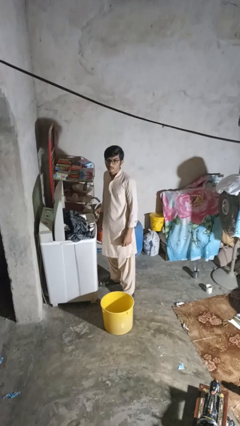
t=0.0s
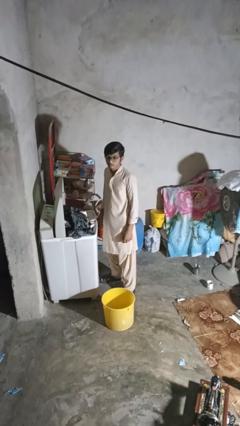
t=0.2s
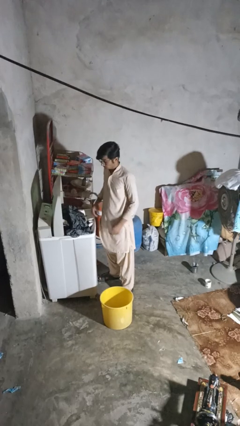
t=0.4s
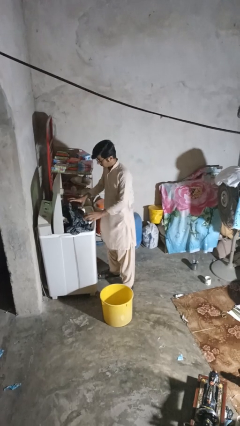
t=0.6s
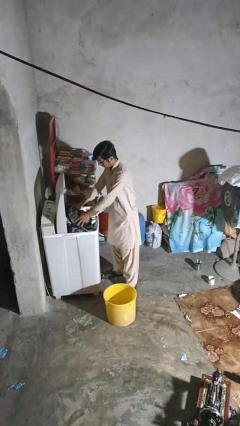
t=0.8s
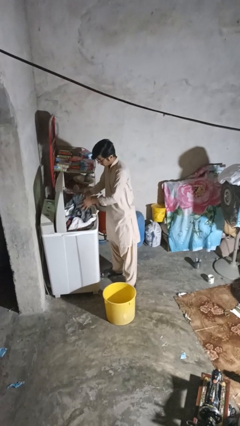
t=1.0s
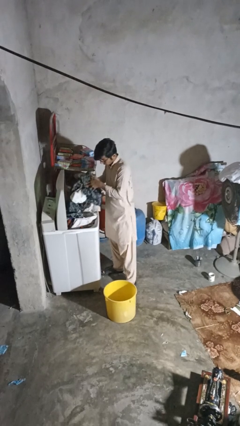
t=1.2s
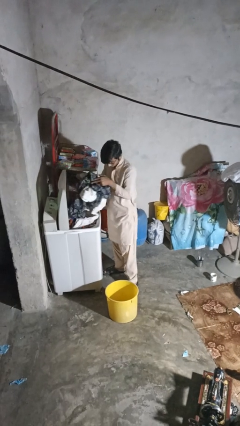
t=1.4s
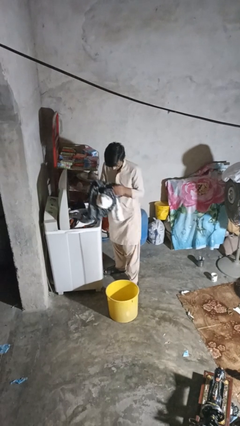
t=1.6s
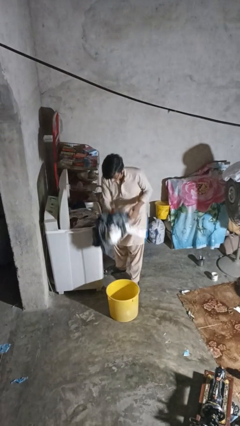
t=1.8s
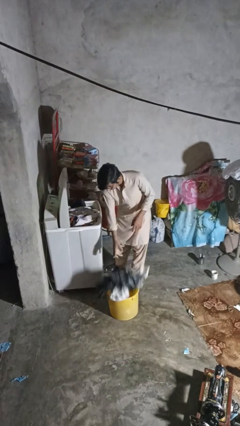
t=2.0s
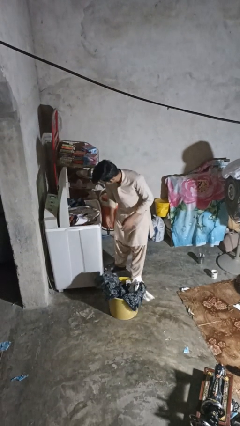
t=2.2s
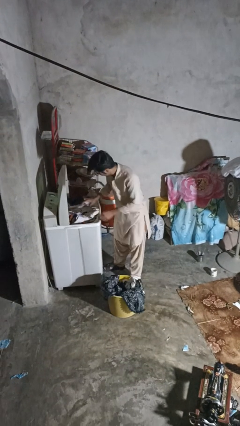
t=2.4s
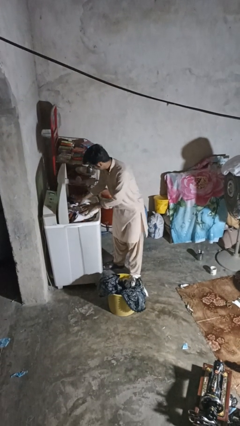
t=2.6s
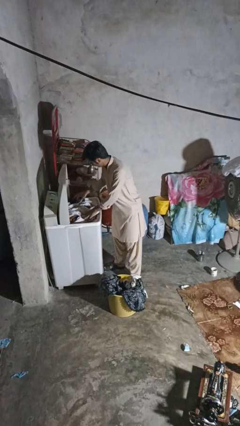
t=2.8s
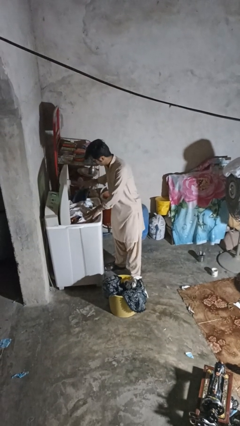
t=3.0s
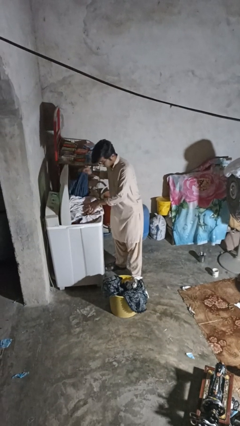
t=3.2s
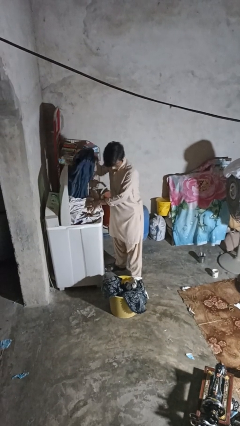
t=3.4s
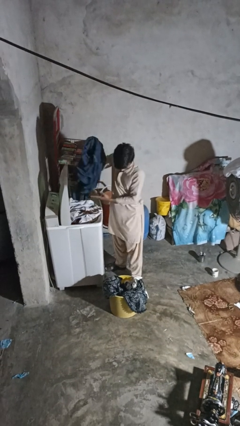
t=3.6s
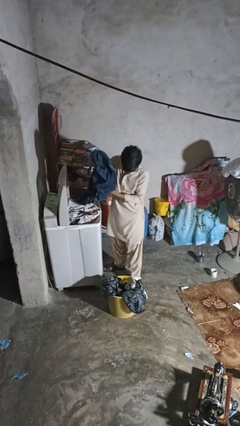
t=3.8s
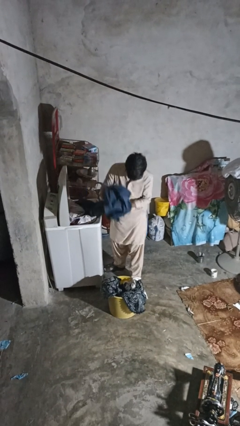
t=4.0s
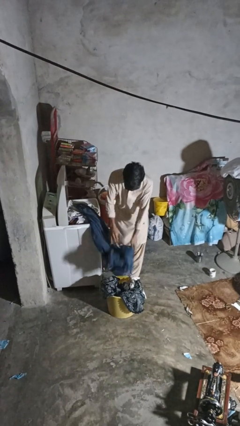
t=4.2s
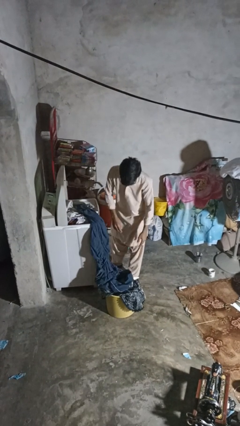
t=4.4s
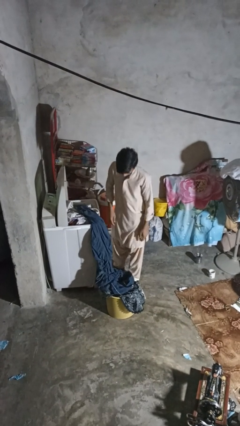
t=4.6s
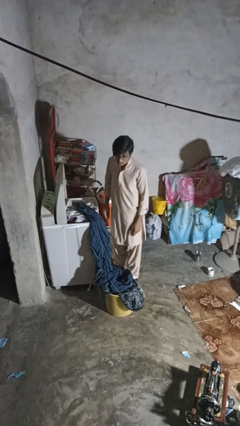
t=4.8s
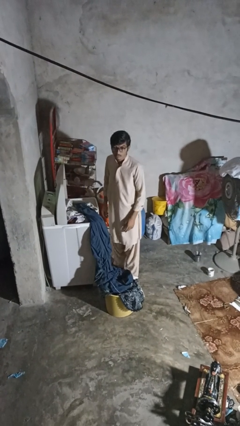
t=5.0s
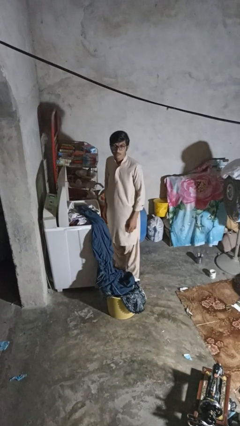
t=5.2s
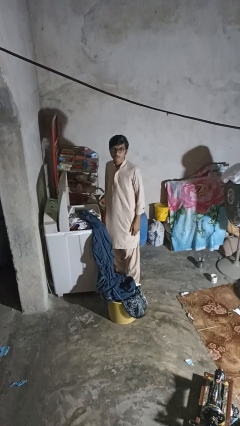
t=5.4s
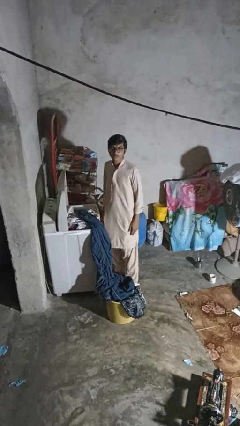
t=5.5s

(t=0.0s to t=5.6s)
person unloads clotheswasher

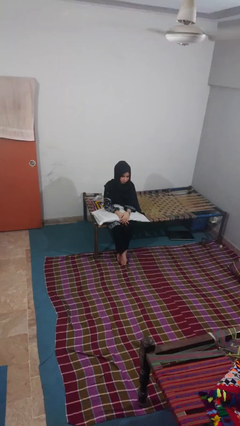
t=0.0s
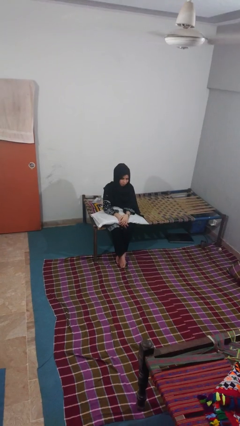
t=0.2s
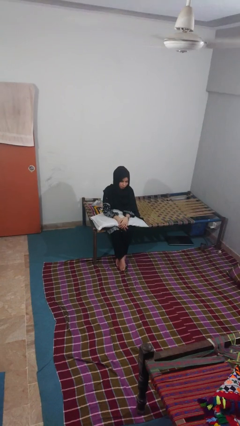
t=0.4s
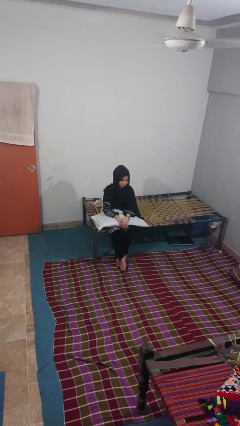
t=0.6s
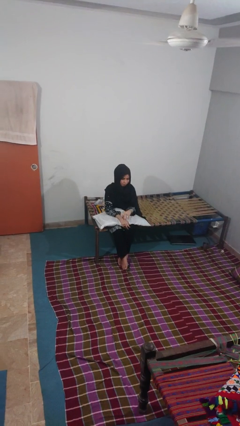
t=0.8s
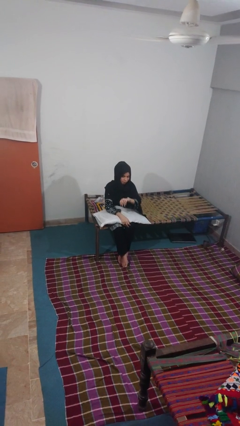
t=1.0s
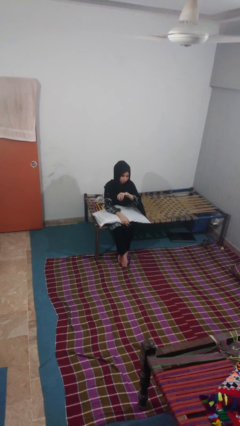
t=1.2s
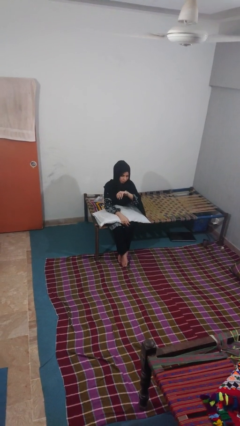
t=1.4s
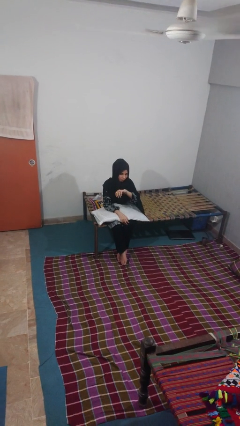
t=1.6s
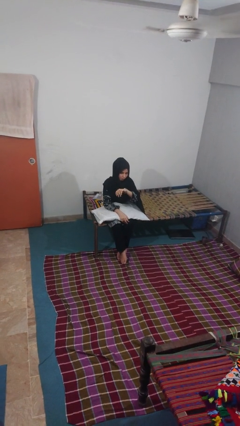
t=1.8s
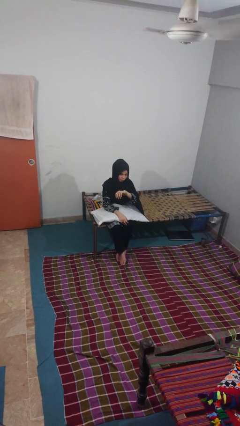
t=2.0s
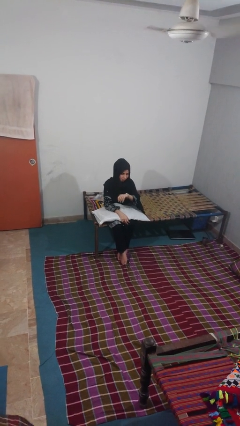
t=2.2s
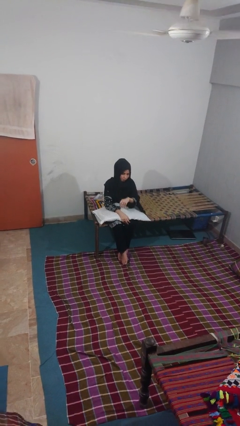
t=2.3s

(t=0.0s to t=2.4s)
person looks at wristwatch

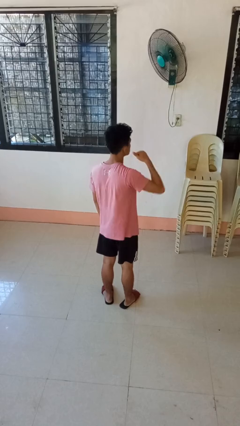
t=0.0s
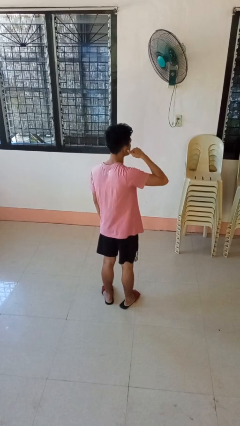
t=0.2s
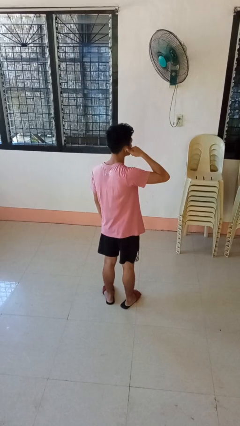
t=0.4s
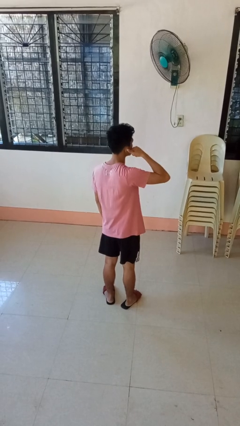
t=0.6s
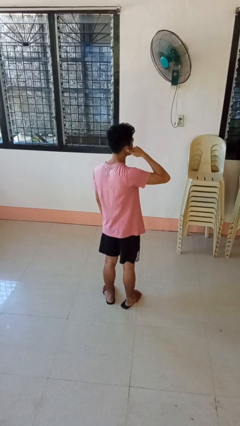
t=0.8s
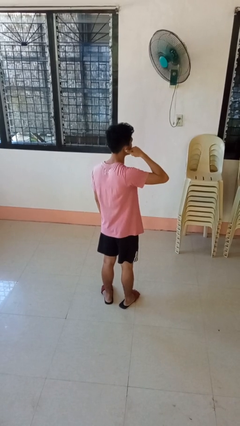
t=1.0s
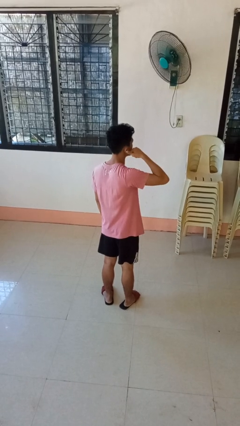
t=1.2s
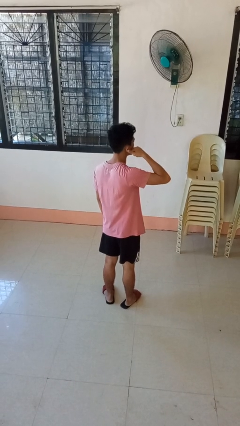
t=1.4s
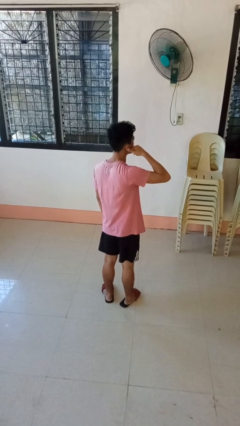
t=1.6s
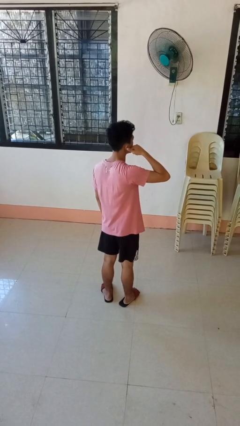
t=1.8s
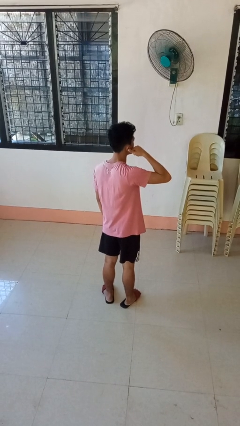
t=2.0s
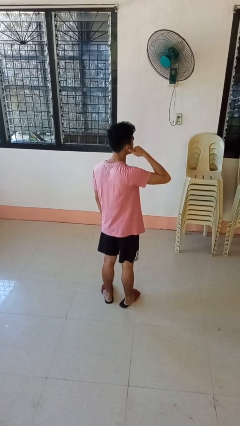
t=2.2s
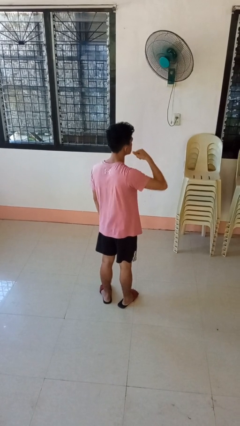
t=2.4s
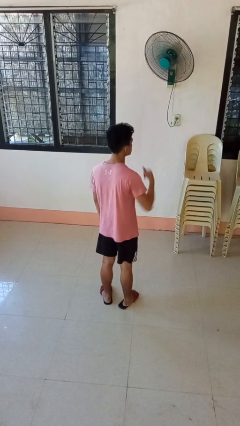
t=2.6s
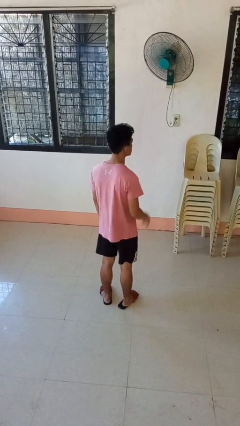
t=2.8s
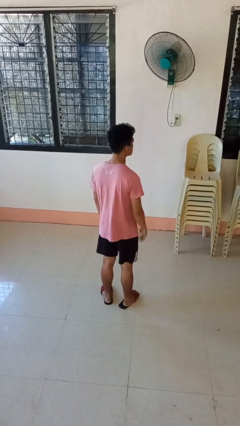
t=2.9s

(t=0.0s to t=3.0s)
person gestures call me

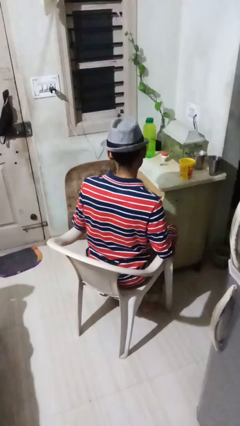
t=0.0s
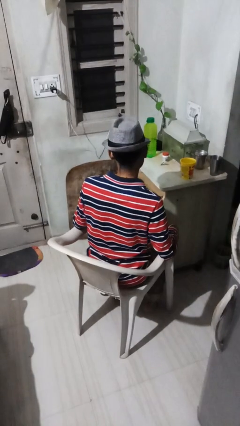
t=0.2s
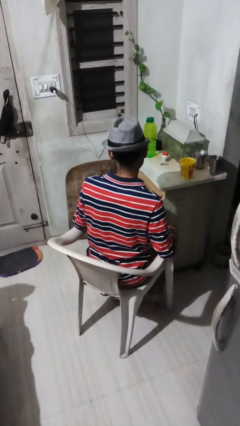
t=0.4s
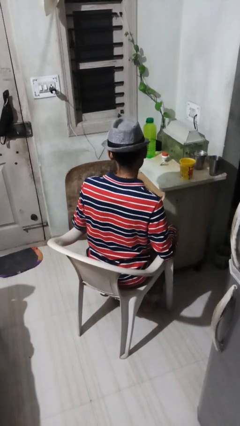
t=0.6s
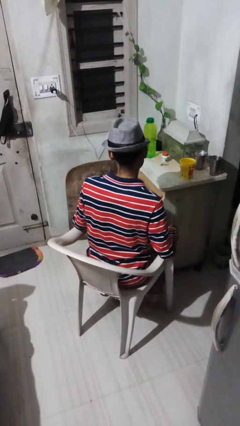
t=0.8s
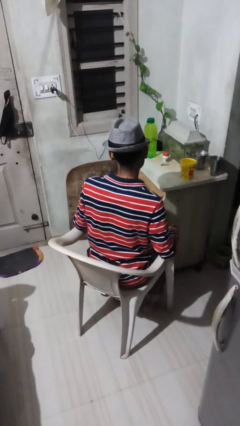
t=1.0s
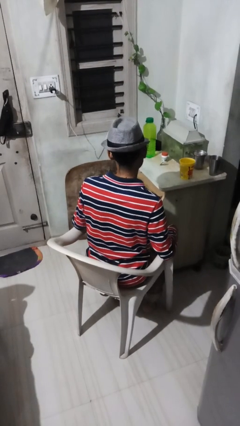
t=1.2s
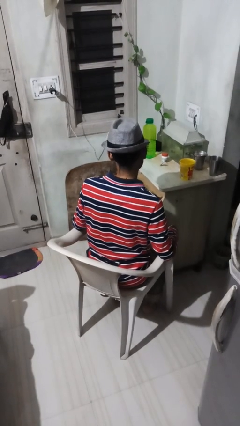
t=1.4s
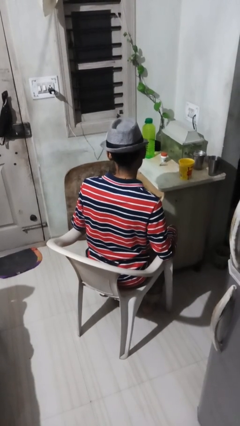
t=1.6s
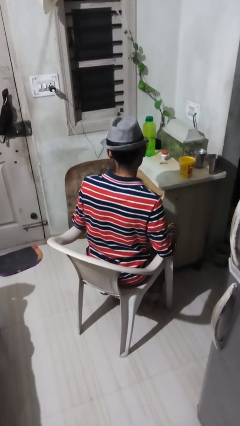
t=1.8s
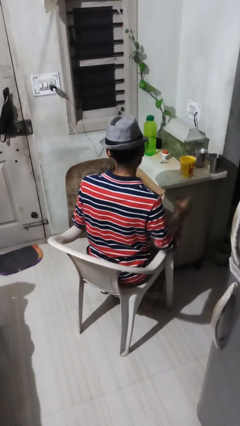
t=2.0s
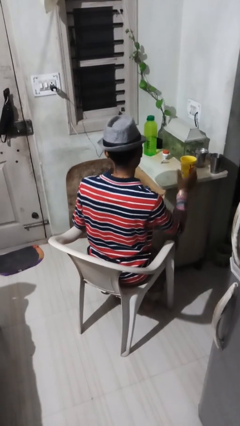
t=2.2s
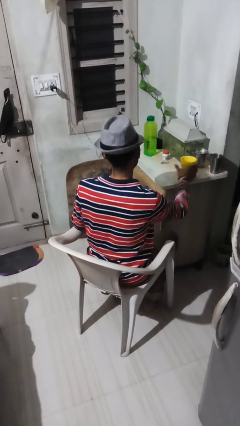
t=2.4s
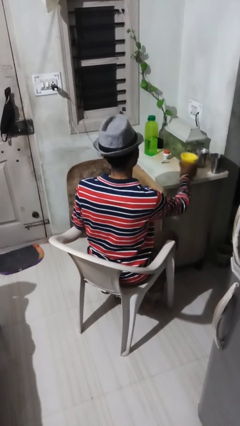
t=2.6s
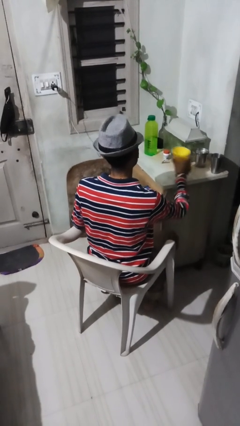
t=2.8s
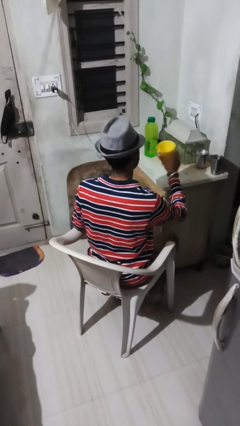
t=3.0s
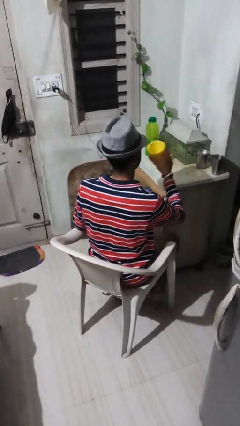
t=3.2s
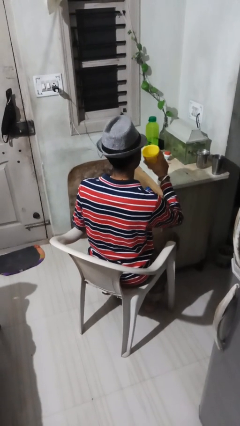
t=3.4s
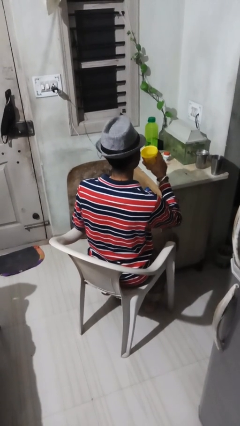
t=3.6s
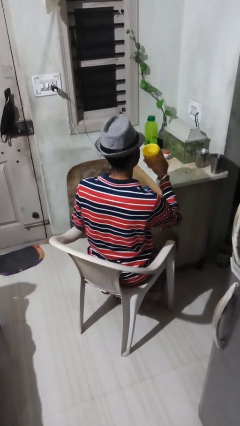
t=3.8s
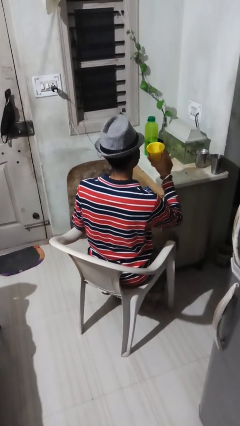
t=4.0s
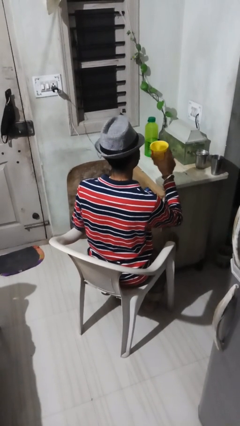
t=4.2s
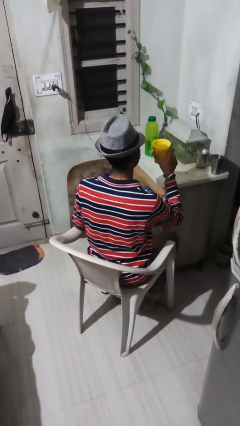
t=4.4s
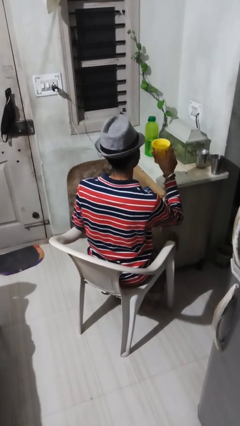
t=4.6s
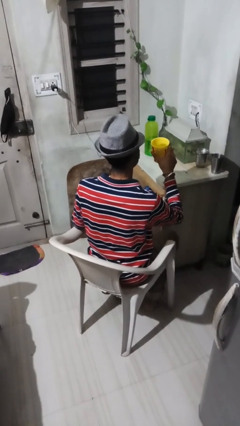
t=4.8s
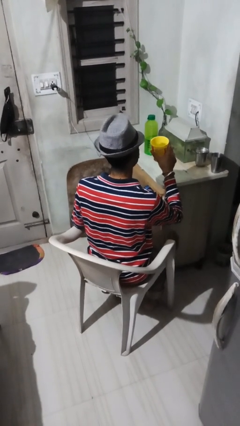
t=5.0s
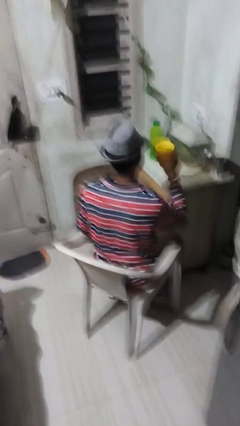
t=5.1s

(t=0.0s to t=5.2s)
person picks up object from table

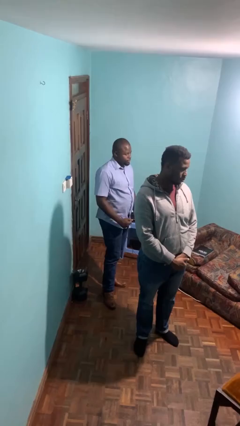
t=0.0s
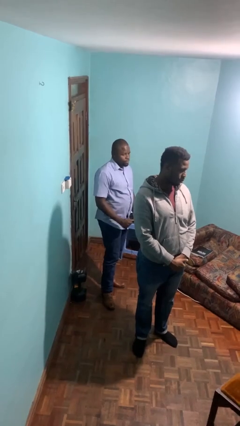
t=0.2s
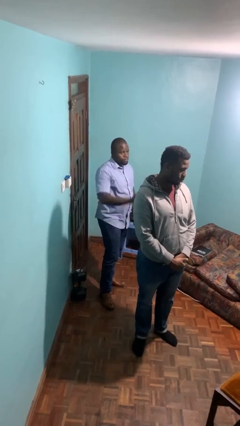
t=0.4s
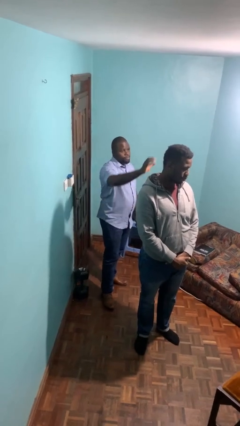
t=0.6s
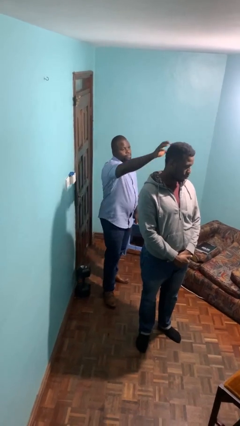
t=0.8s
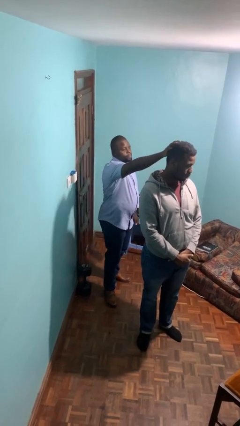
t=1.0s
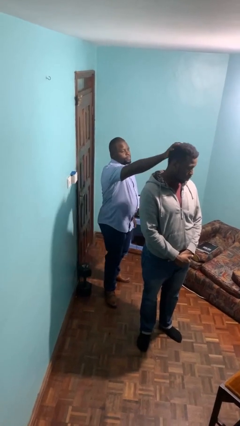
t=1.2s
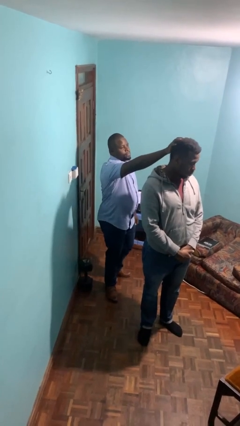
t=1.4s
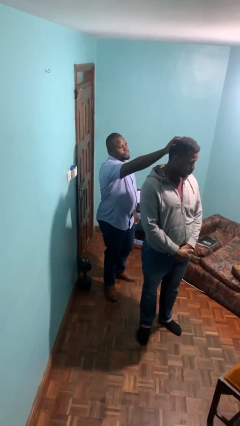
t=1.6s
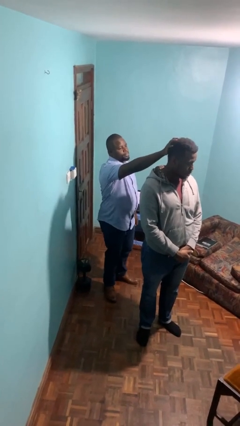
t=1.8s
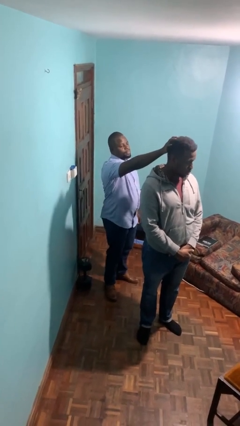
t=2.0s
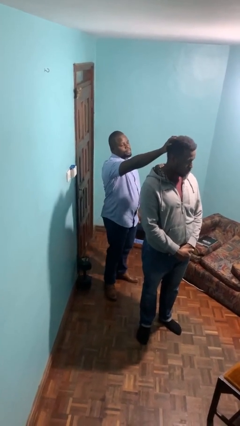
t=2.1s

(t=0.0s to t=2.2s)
person grabs person by hair
